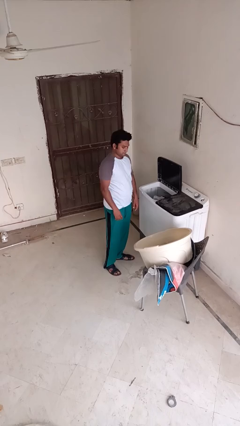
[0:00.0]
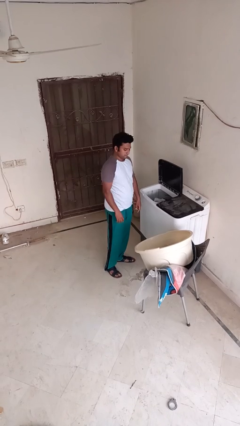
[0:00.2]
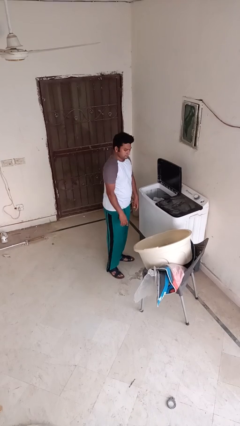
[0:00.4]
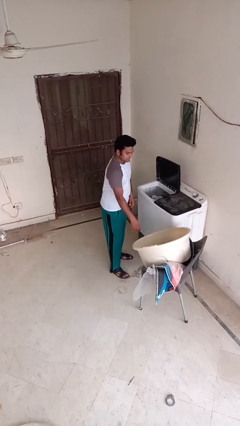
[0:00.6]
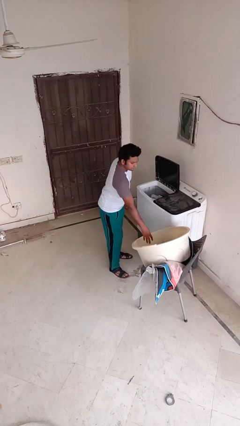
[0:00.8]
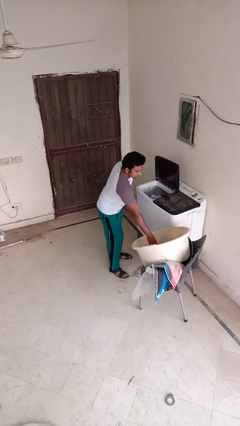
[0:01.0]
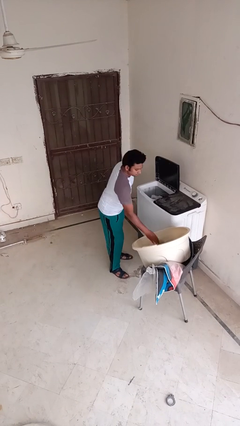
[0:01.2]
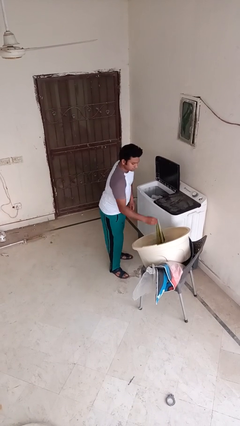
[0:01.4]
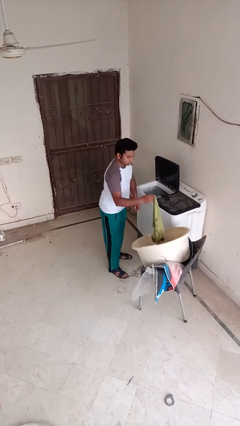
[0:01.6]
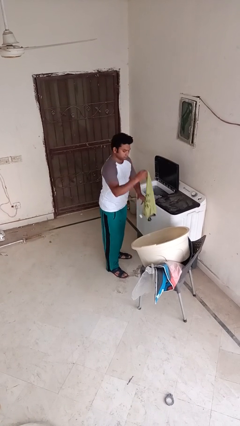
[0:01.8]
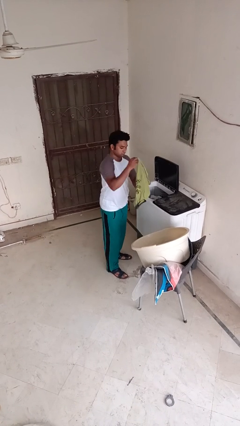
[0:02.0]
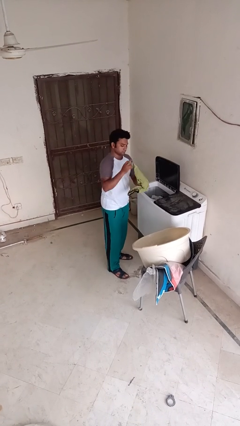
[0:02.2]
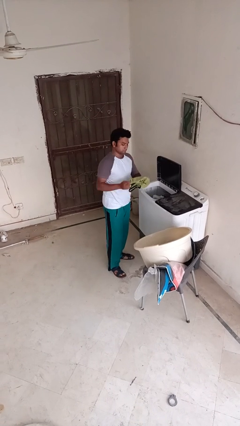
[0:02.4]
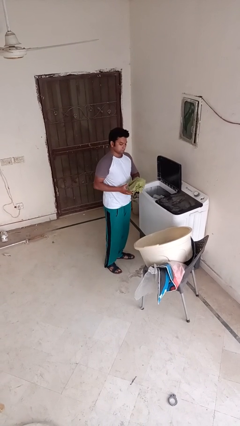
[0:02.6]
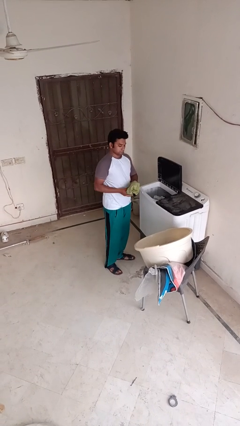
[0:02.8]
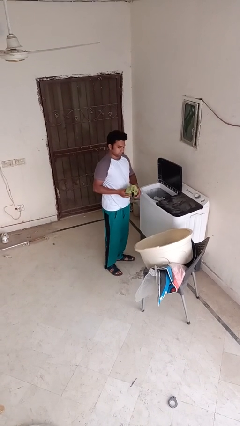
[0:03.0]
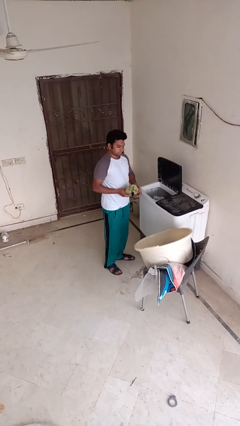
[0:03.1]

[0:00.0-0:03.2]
person unloads clotheswasher

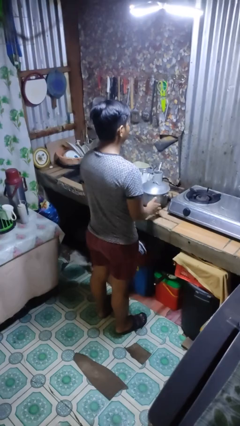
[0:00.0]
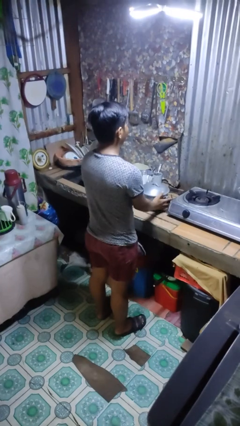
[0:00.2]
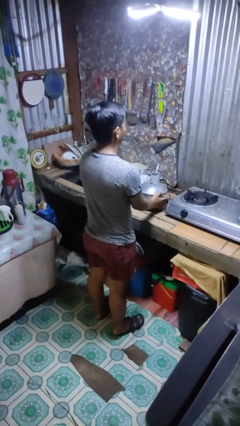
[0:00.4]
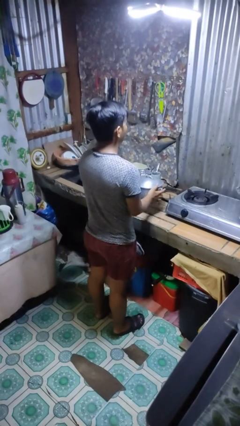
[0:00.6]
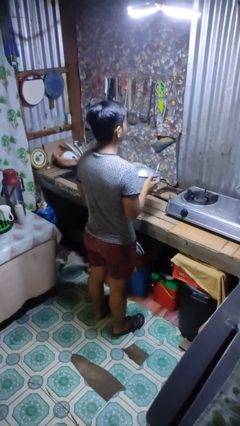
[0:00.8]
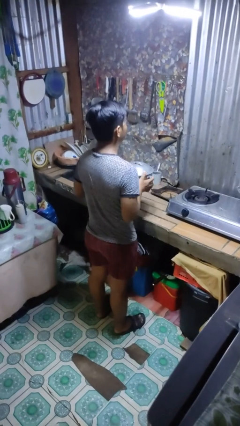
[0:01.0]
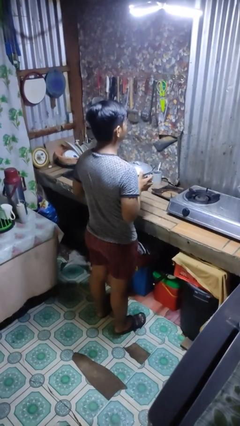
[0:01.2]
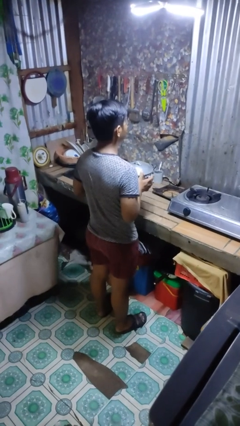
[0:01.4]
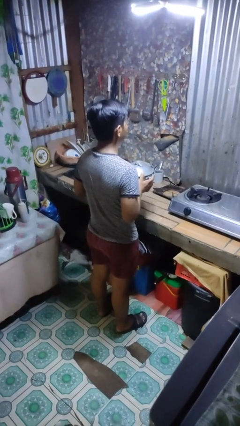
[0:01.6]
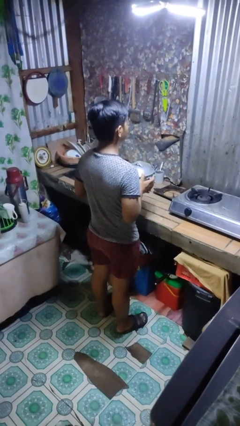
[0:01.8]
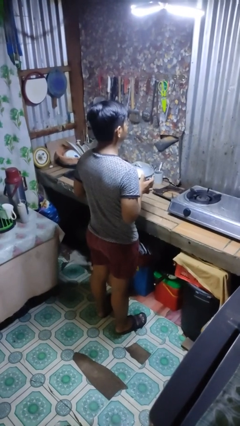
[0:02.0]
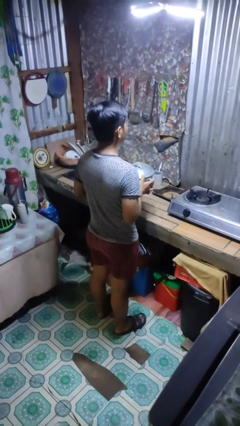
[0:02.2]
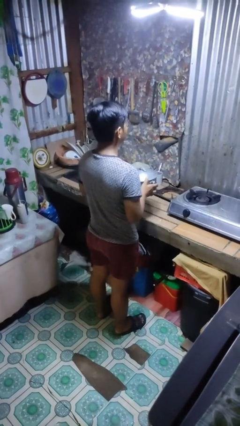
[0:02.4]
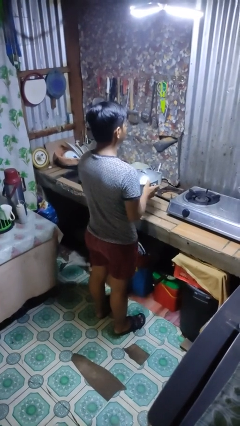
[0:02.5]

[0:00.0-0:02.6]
person picks up object from countertop

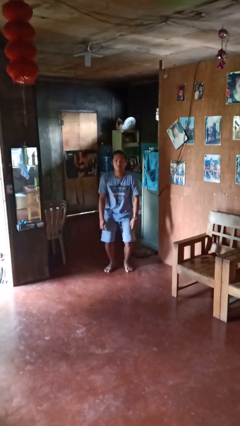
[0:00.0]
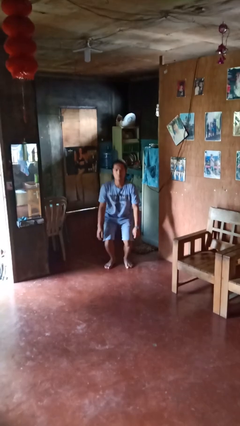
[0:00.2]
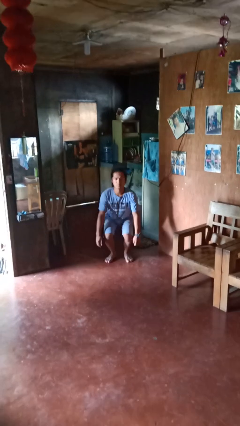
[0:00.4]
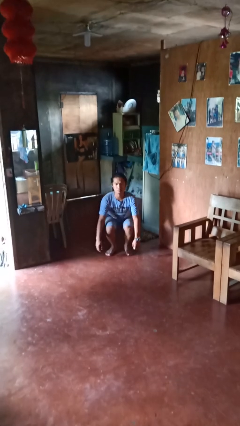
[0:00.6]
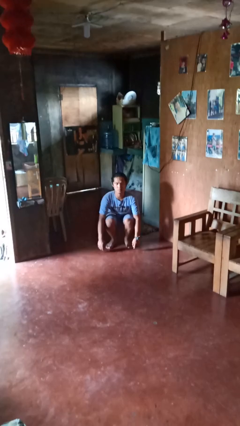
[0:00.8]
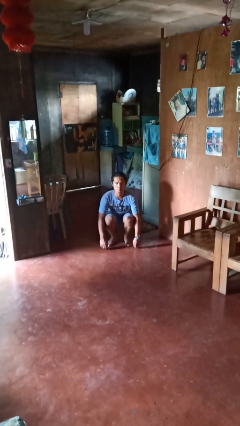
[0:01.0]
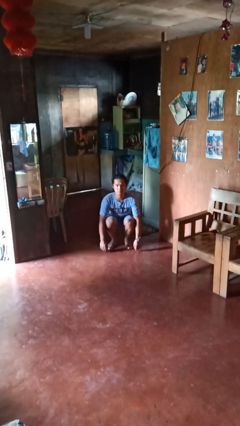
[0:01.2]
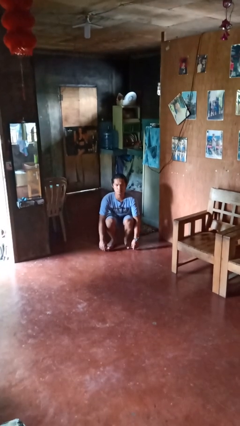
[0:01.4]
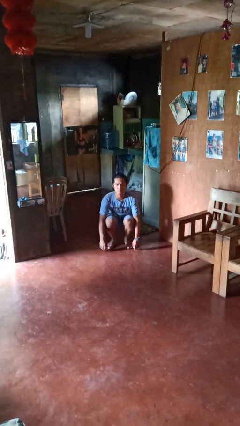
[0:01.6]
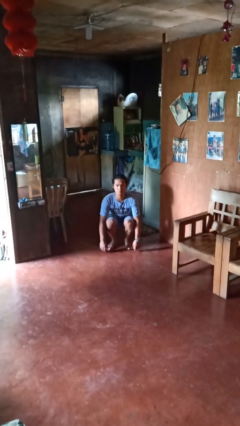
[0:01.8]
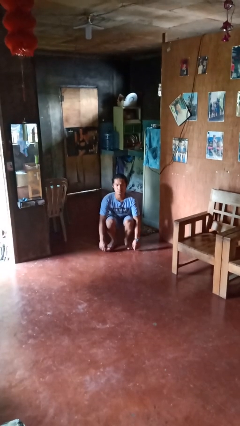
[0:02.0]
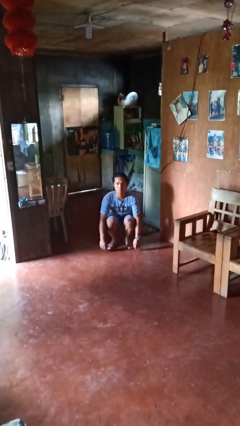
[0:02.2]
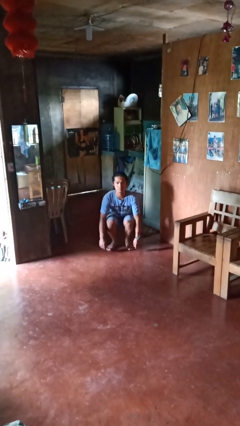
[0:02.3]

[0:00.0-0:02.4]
person squats

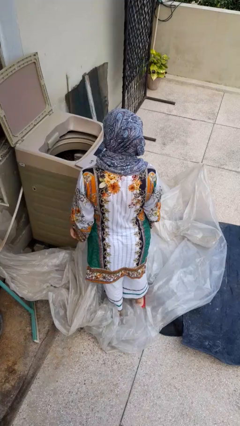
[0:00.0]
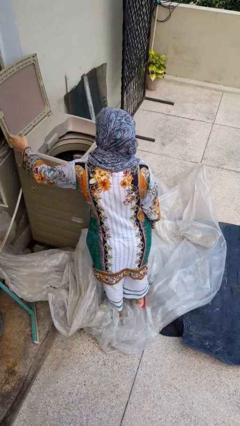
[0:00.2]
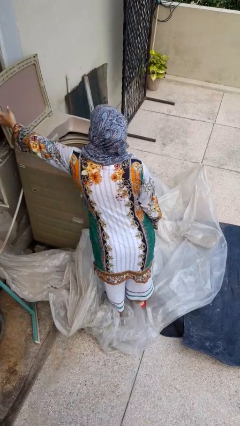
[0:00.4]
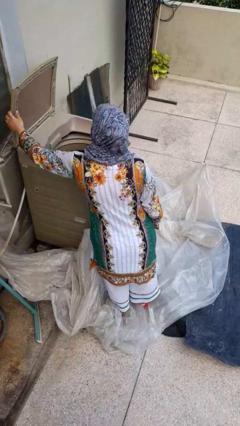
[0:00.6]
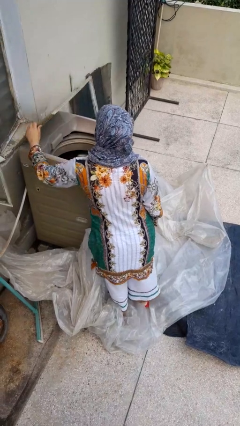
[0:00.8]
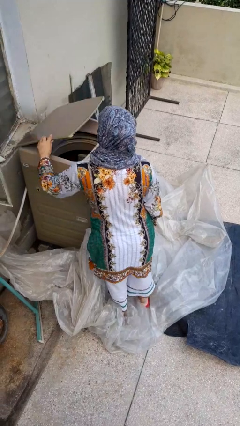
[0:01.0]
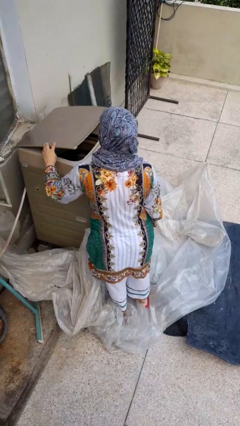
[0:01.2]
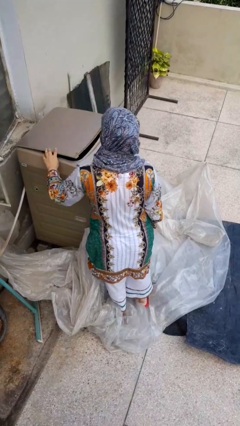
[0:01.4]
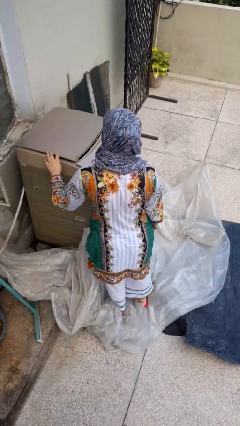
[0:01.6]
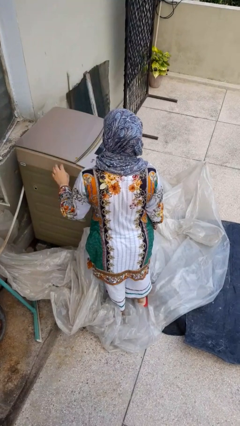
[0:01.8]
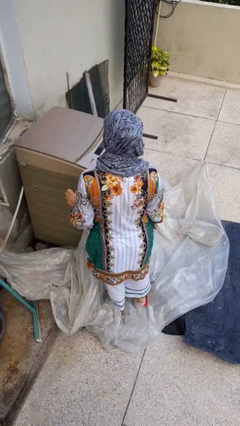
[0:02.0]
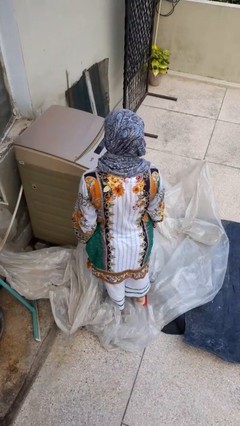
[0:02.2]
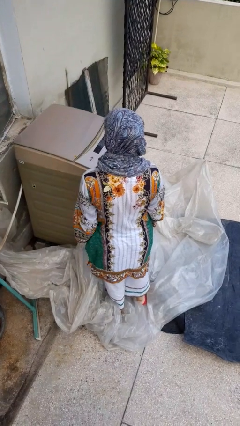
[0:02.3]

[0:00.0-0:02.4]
person closes clothes washer

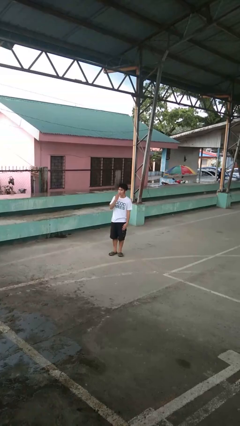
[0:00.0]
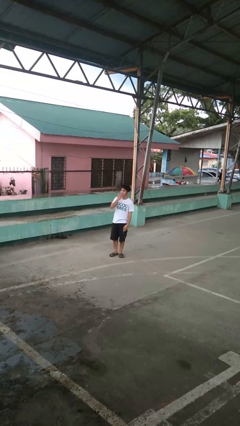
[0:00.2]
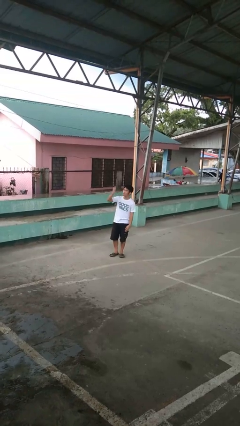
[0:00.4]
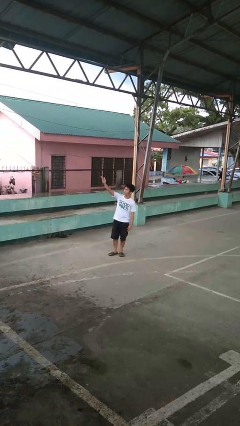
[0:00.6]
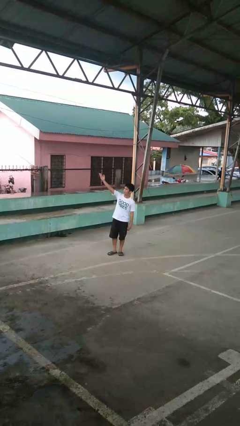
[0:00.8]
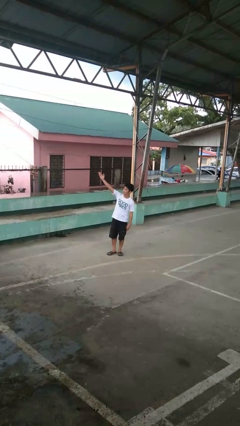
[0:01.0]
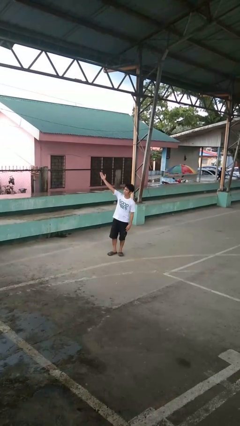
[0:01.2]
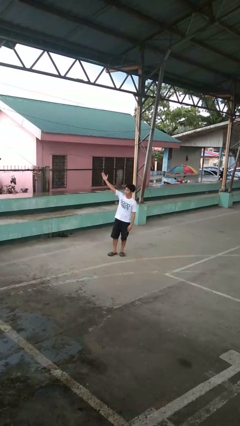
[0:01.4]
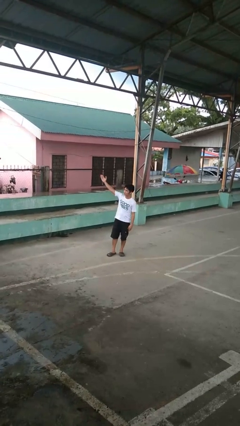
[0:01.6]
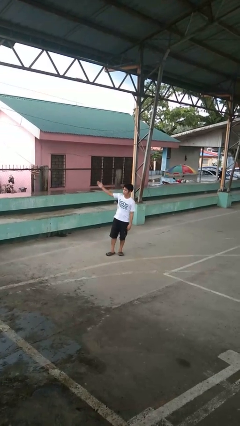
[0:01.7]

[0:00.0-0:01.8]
person gestures blow kiss

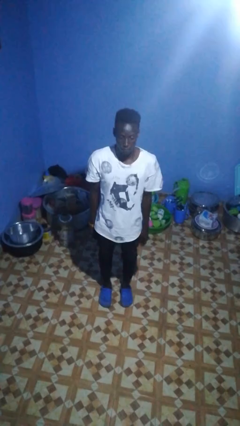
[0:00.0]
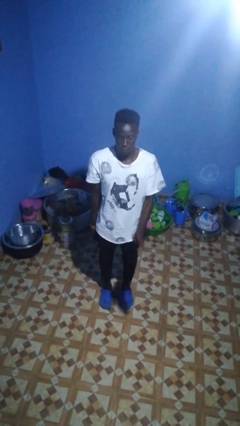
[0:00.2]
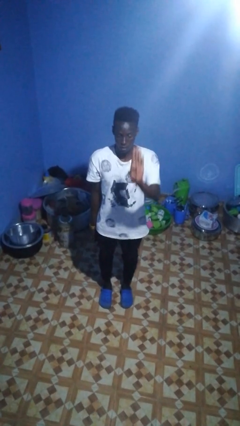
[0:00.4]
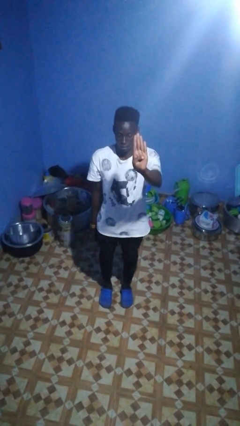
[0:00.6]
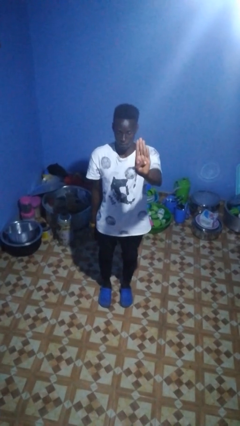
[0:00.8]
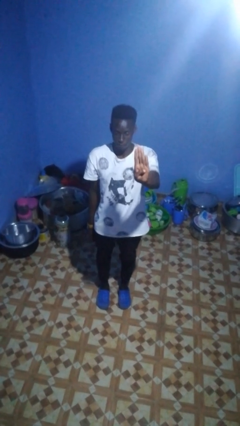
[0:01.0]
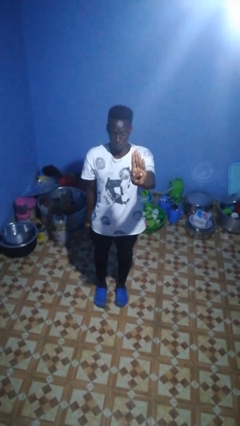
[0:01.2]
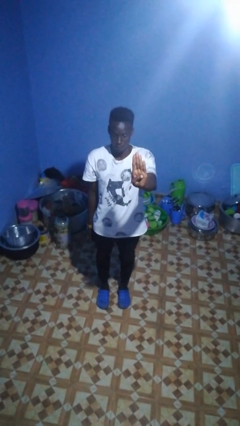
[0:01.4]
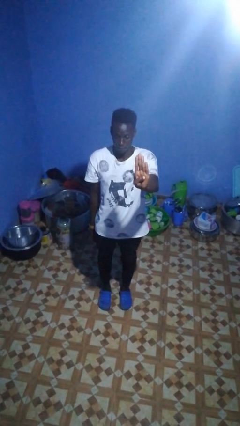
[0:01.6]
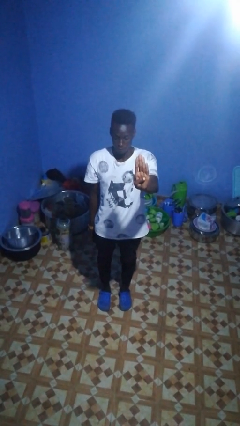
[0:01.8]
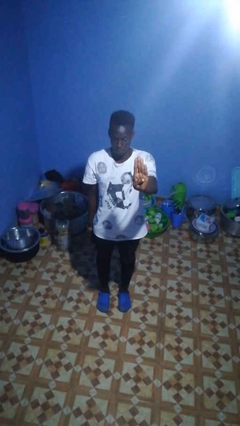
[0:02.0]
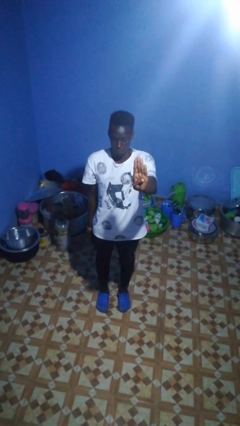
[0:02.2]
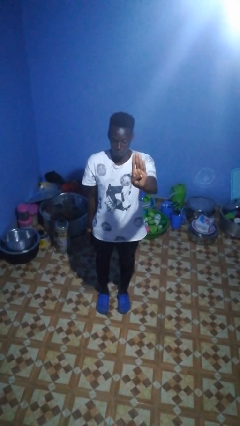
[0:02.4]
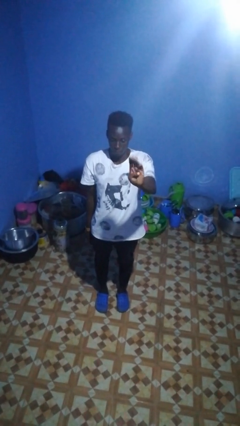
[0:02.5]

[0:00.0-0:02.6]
person gestures number four

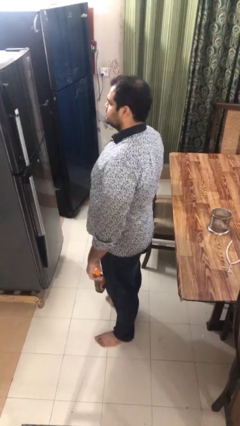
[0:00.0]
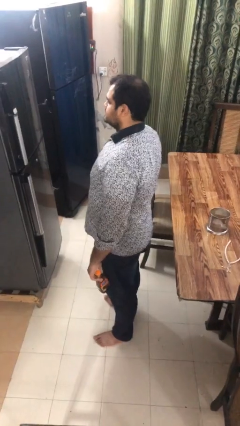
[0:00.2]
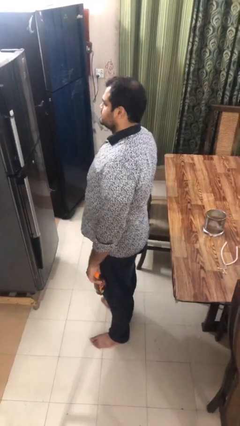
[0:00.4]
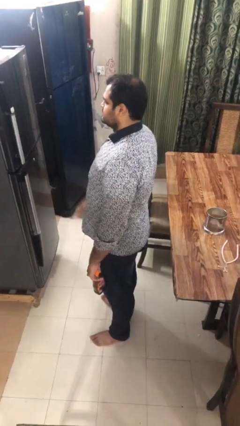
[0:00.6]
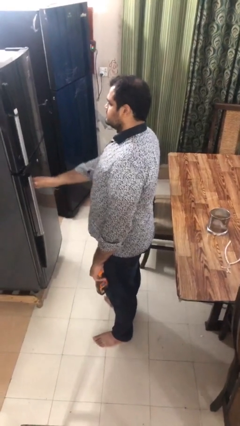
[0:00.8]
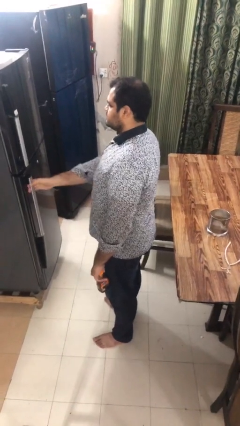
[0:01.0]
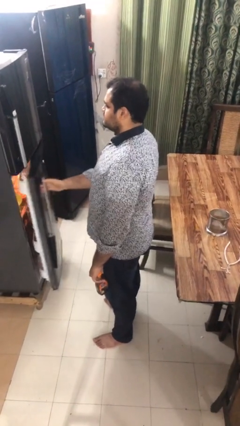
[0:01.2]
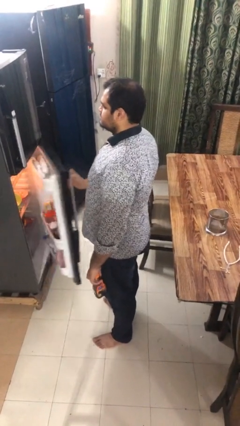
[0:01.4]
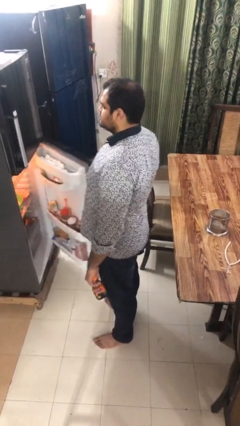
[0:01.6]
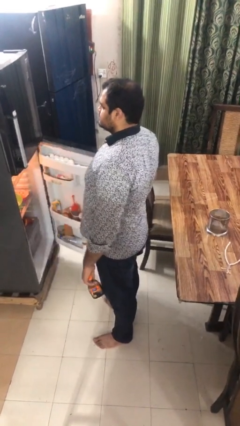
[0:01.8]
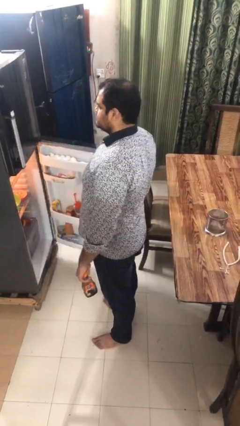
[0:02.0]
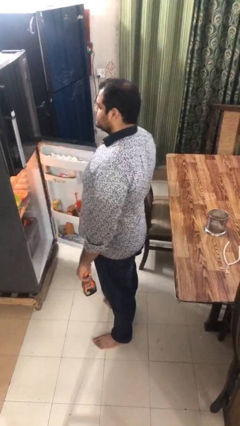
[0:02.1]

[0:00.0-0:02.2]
person opens refrigerator
